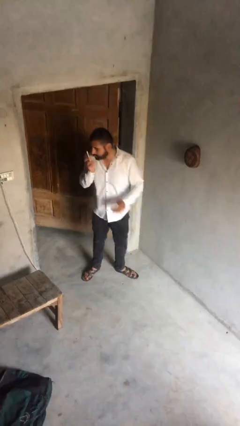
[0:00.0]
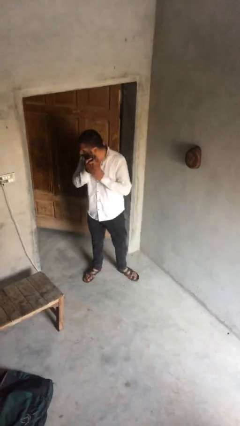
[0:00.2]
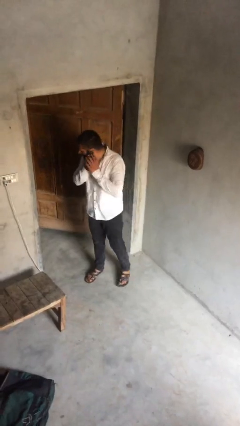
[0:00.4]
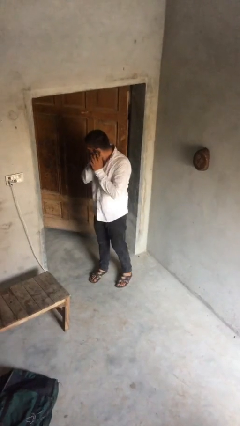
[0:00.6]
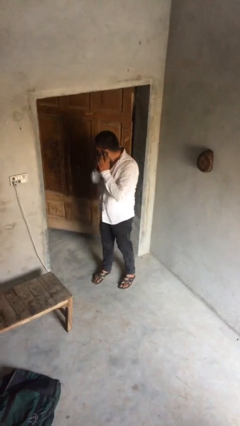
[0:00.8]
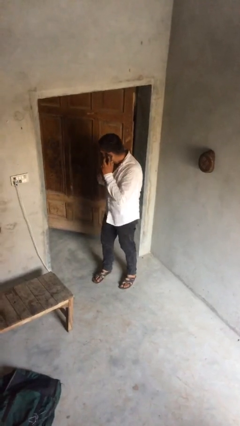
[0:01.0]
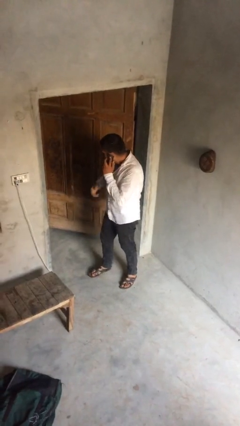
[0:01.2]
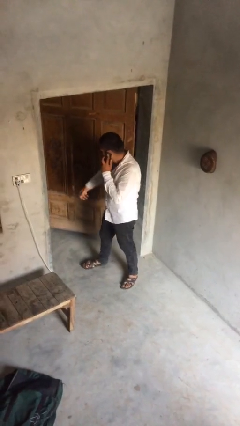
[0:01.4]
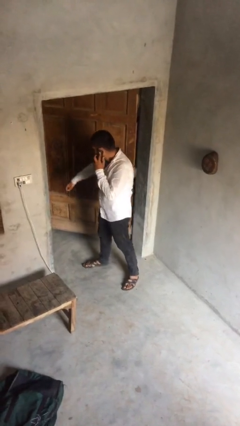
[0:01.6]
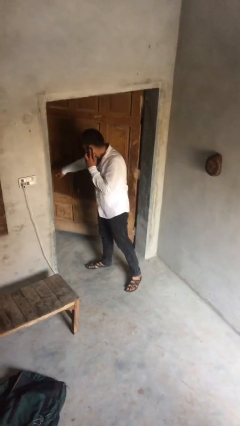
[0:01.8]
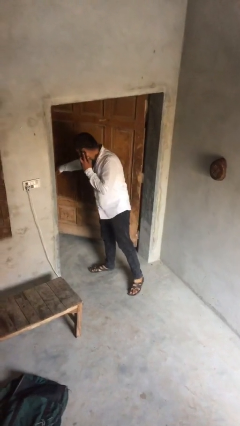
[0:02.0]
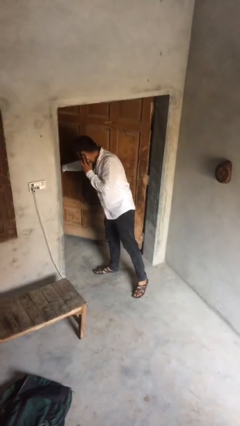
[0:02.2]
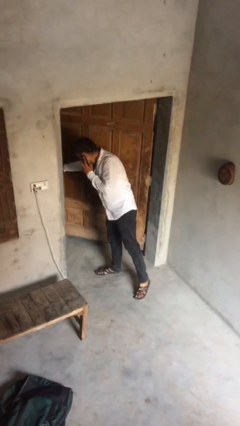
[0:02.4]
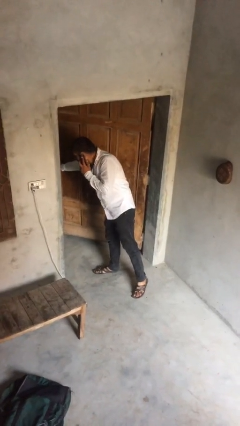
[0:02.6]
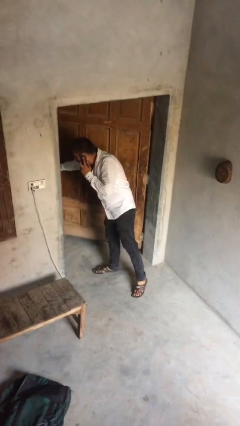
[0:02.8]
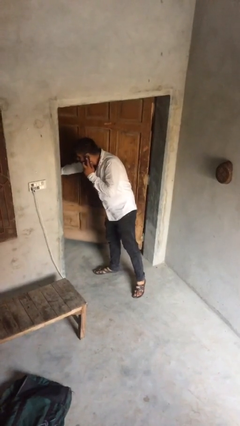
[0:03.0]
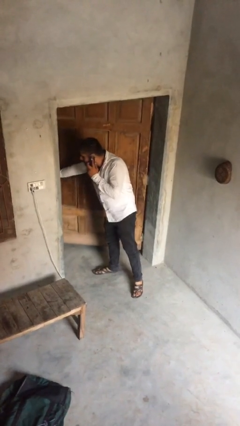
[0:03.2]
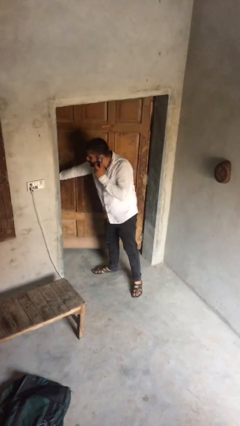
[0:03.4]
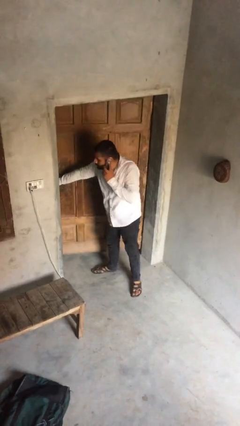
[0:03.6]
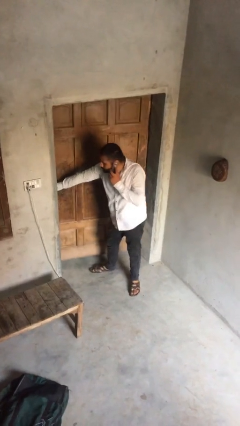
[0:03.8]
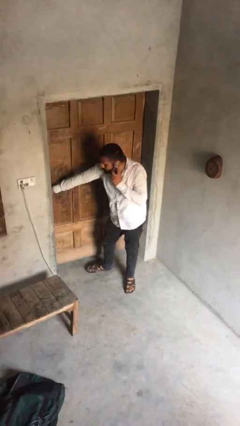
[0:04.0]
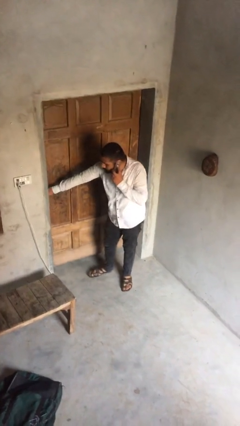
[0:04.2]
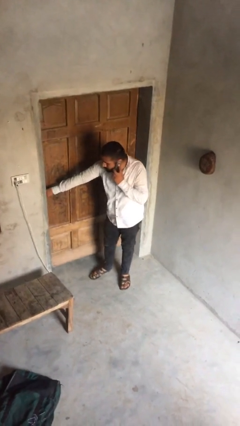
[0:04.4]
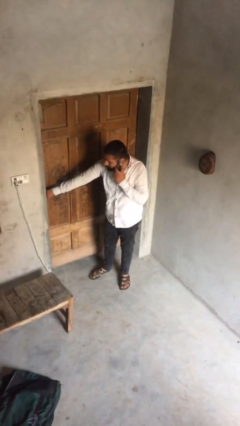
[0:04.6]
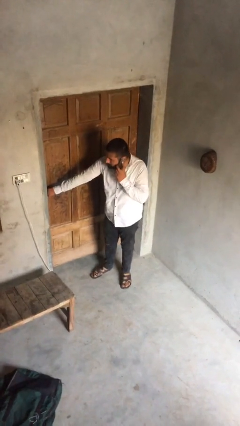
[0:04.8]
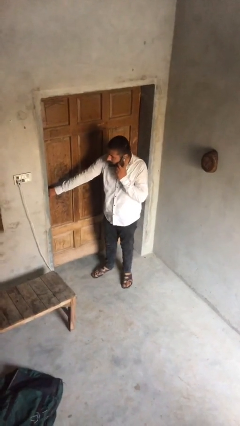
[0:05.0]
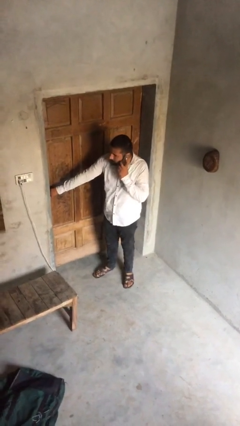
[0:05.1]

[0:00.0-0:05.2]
person closes facility door

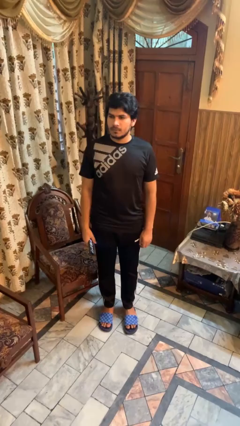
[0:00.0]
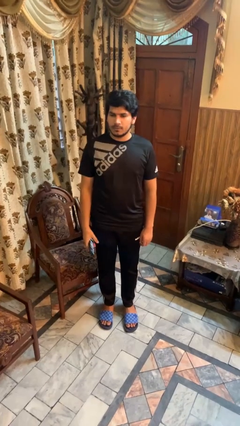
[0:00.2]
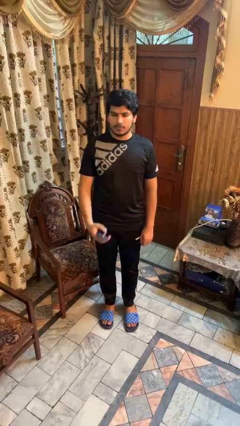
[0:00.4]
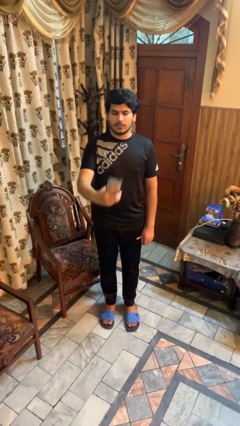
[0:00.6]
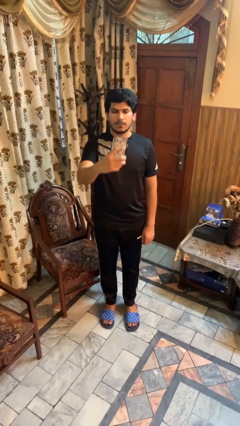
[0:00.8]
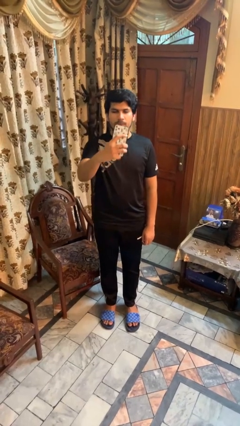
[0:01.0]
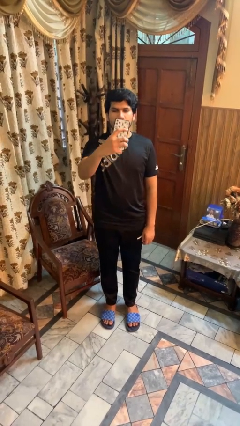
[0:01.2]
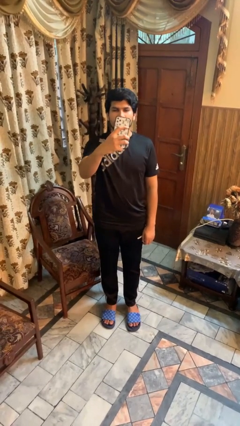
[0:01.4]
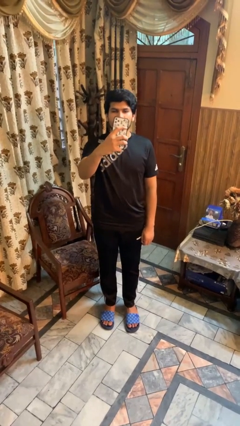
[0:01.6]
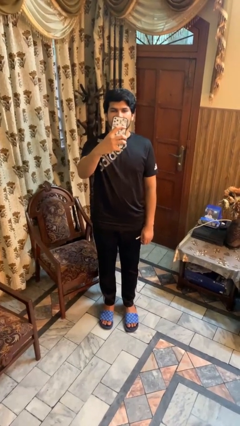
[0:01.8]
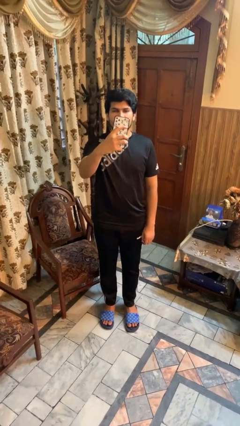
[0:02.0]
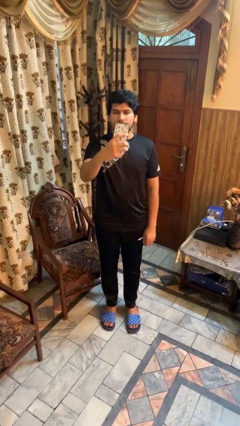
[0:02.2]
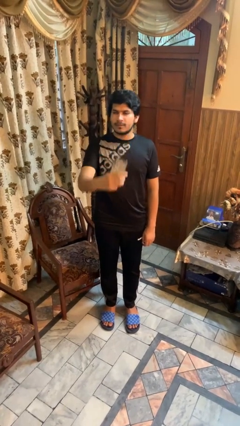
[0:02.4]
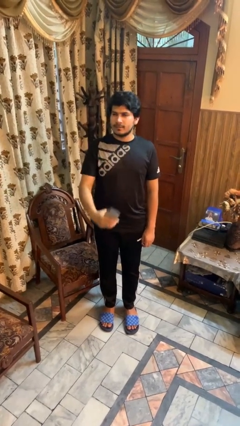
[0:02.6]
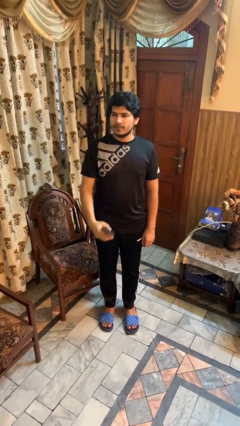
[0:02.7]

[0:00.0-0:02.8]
person takes selfie

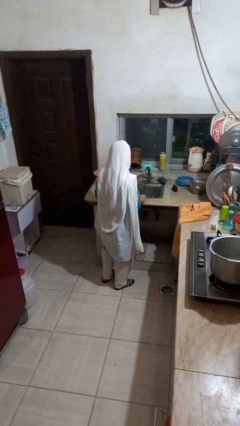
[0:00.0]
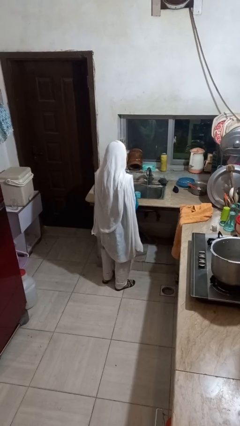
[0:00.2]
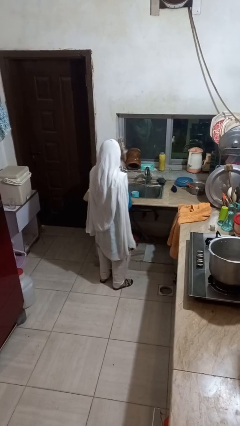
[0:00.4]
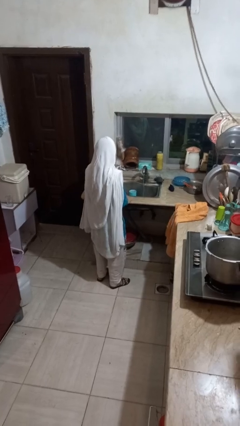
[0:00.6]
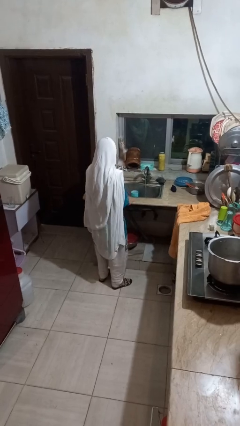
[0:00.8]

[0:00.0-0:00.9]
person dries hands with towel

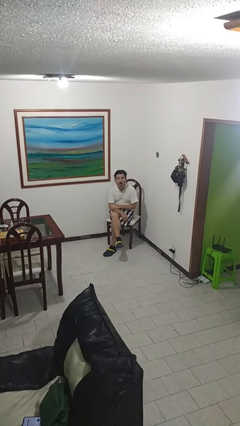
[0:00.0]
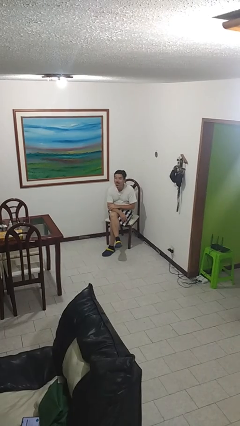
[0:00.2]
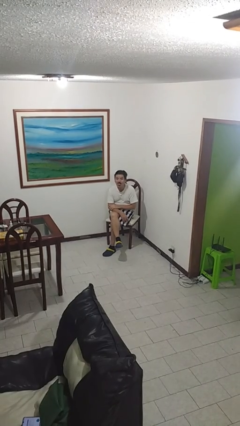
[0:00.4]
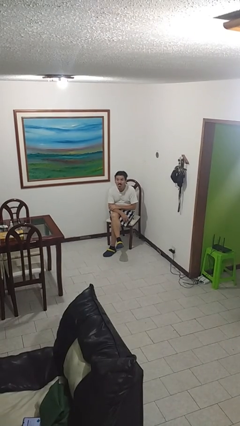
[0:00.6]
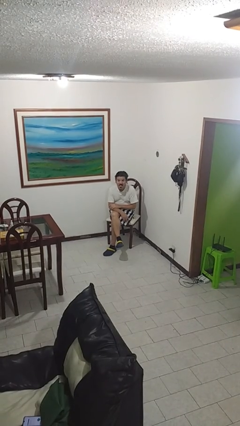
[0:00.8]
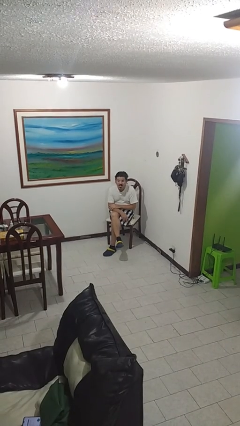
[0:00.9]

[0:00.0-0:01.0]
person sticks out tongue

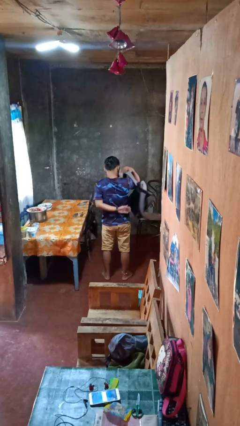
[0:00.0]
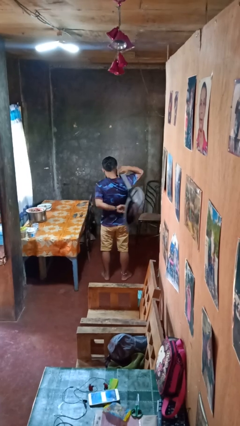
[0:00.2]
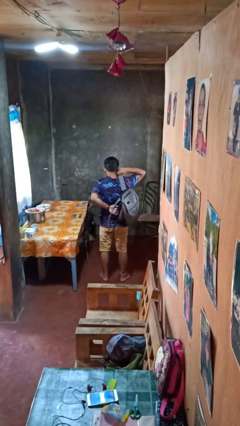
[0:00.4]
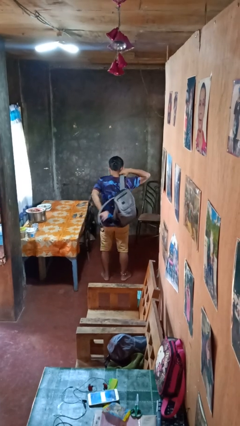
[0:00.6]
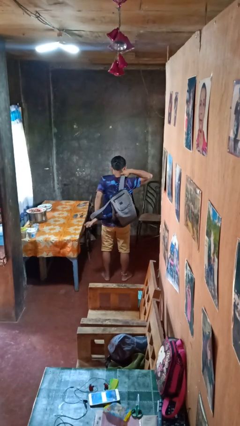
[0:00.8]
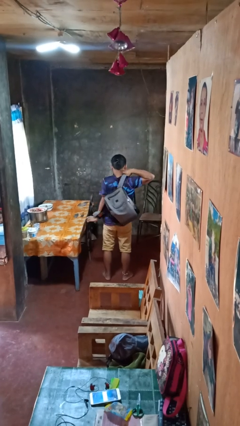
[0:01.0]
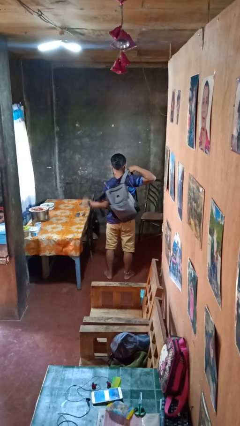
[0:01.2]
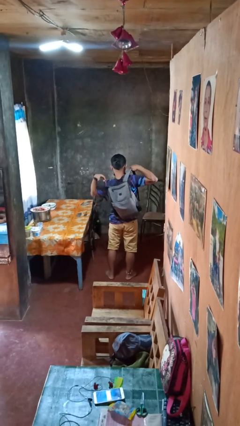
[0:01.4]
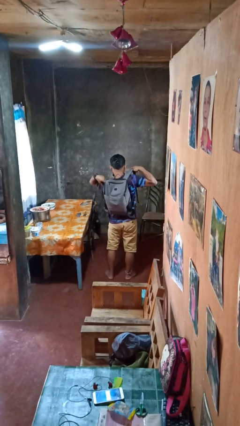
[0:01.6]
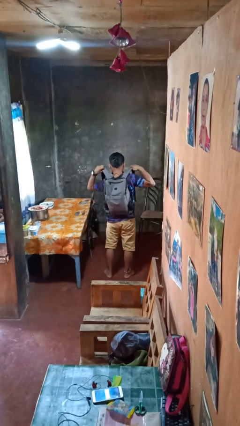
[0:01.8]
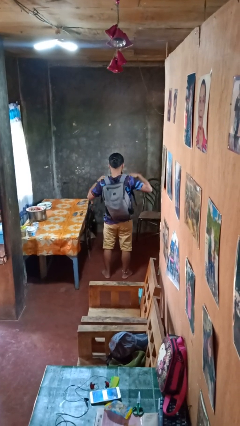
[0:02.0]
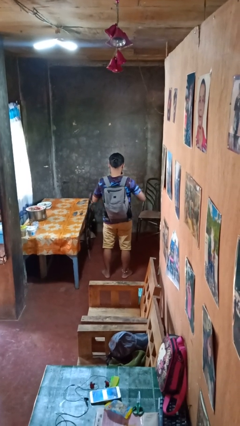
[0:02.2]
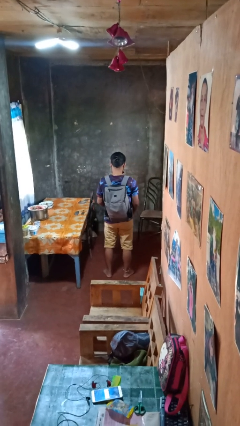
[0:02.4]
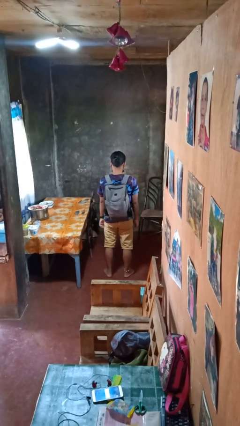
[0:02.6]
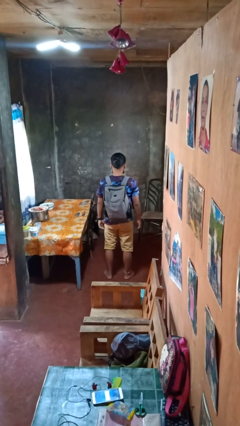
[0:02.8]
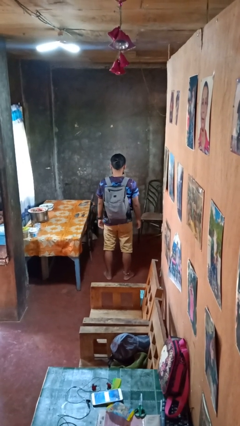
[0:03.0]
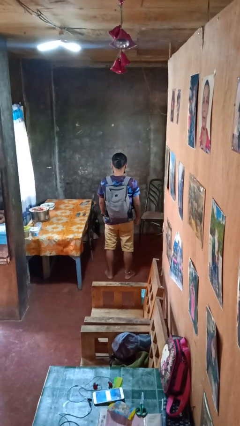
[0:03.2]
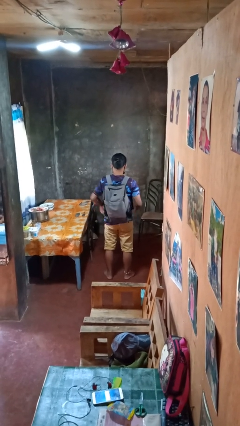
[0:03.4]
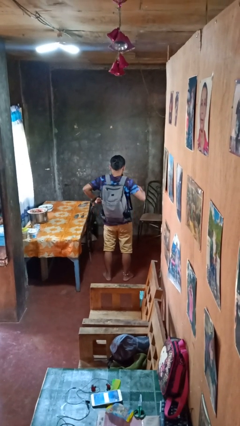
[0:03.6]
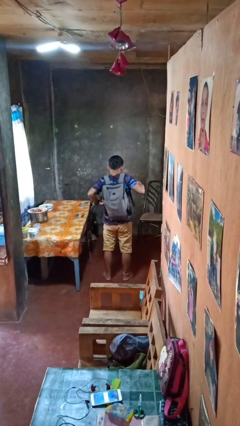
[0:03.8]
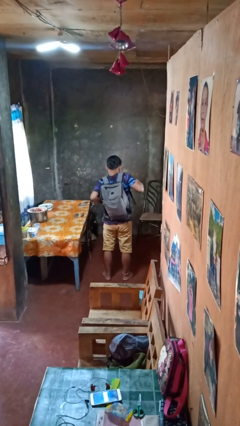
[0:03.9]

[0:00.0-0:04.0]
person puts on backpack

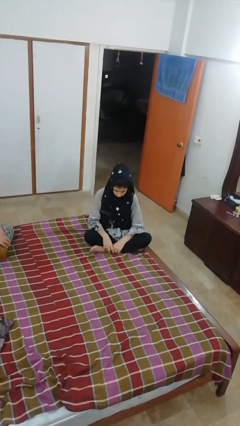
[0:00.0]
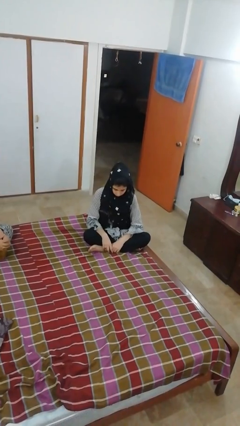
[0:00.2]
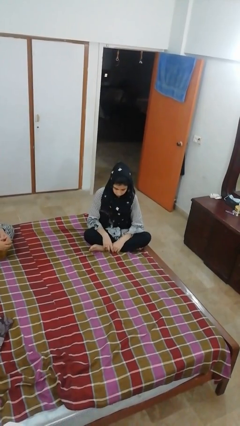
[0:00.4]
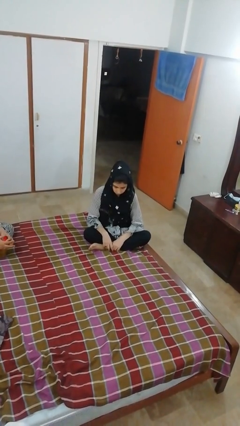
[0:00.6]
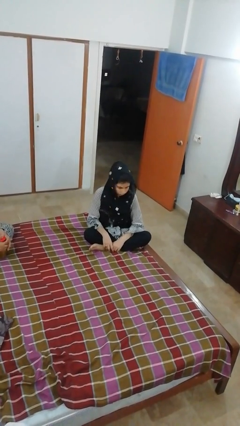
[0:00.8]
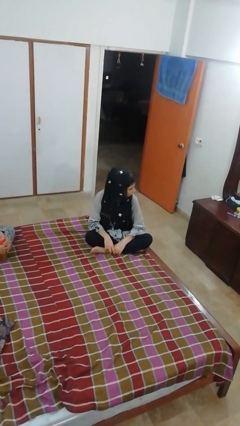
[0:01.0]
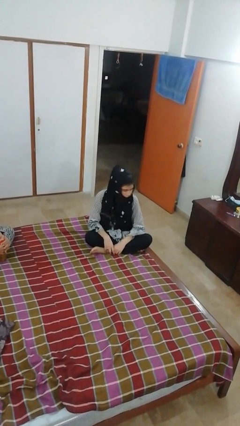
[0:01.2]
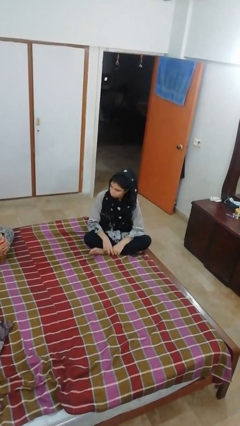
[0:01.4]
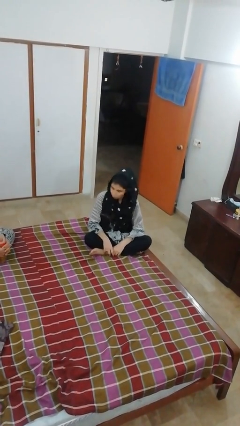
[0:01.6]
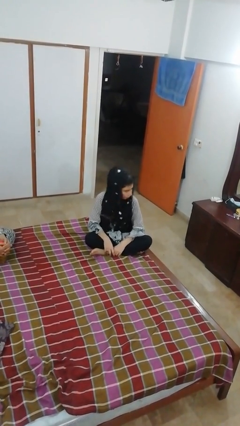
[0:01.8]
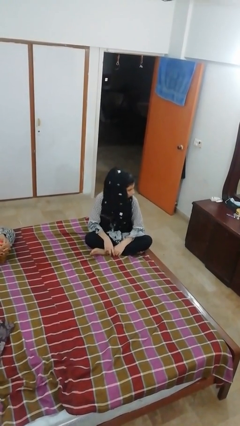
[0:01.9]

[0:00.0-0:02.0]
person shakes head

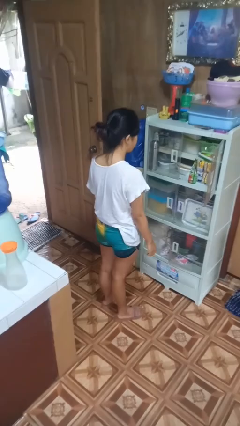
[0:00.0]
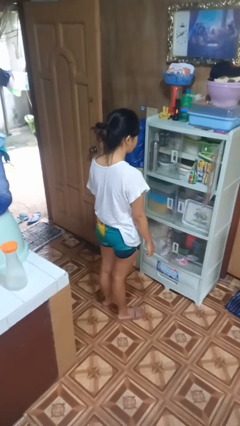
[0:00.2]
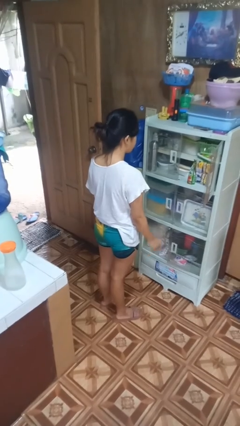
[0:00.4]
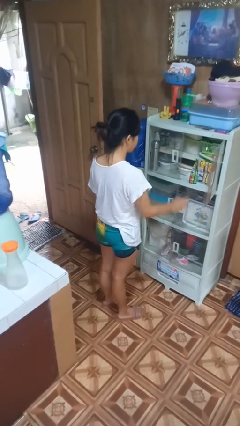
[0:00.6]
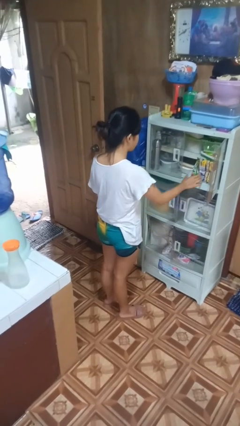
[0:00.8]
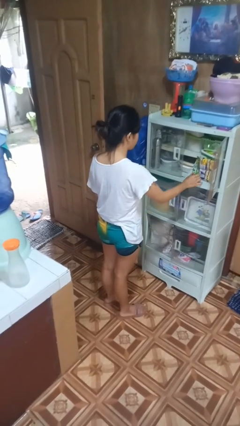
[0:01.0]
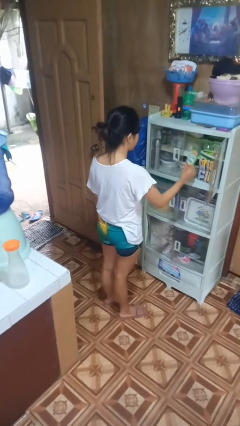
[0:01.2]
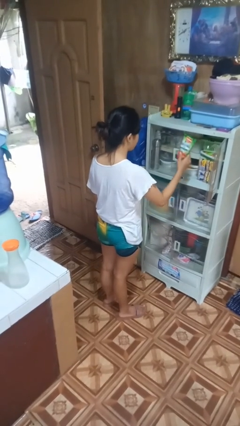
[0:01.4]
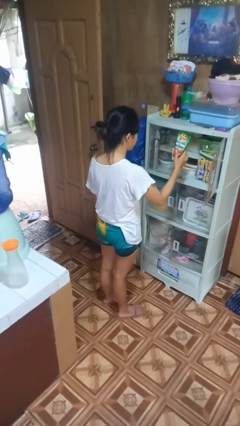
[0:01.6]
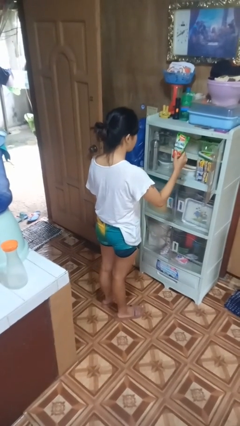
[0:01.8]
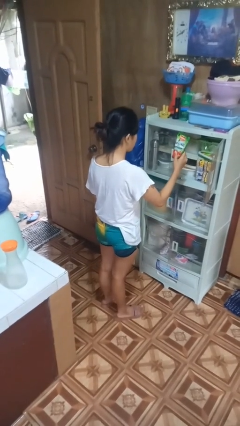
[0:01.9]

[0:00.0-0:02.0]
person picks up object from cabinet
